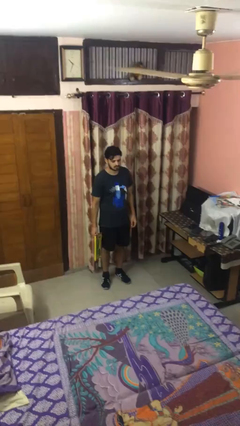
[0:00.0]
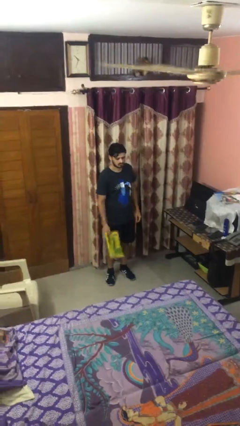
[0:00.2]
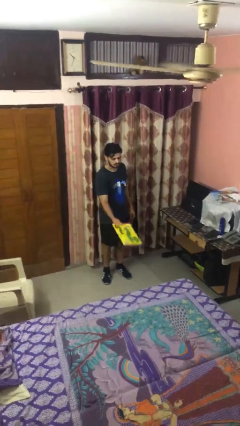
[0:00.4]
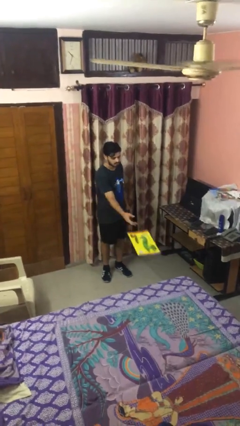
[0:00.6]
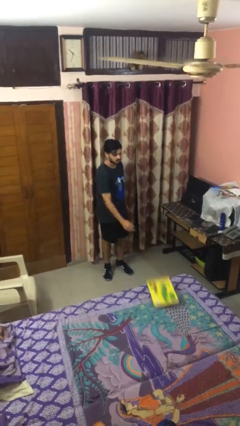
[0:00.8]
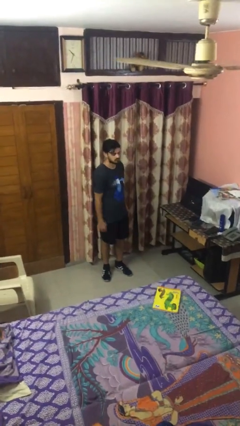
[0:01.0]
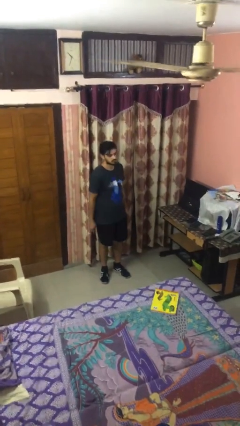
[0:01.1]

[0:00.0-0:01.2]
person throws object on bed

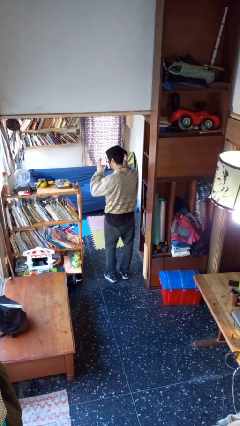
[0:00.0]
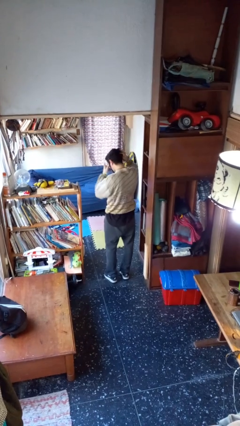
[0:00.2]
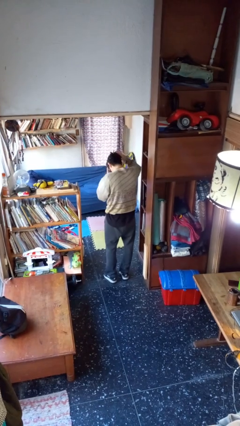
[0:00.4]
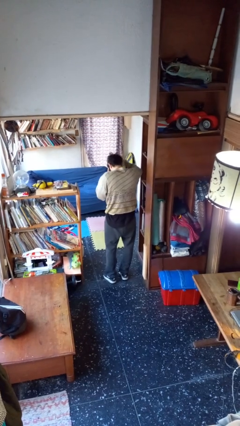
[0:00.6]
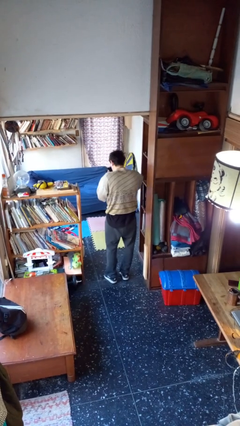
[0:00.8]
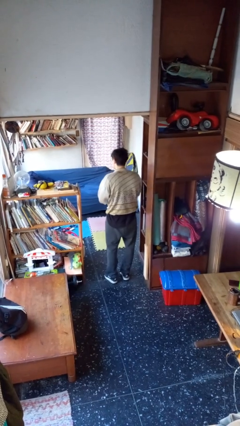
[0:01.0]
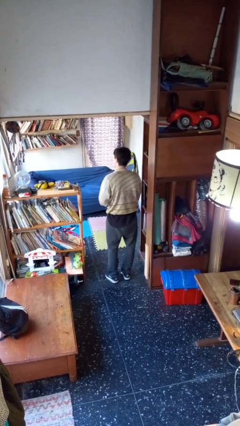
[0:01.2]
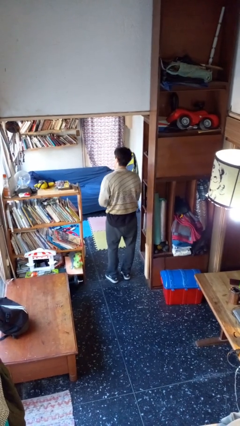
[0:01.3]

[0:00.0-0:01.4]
person takes off facemask

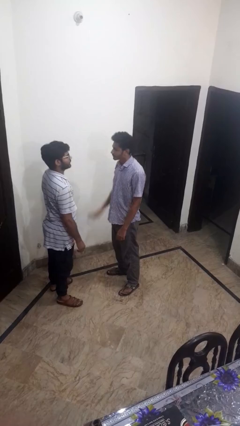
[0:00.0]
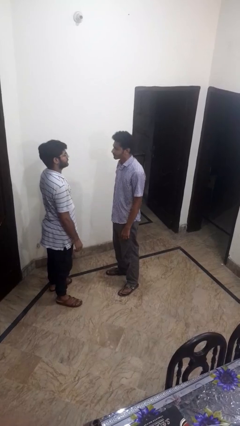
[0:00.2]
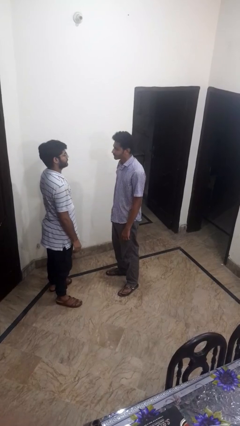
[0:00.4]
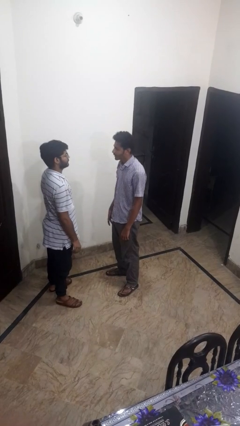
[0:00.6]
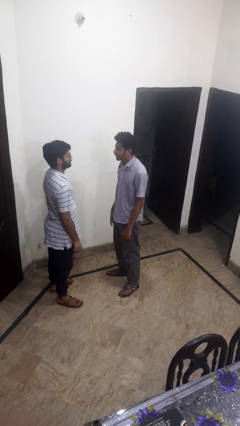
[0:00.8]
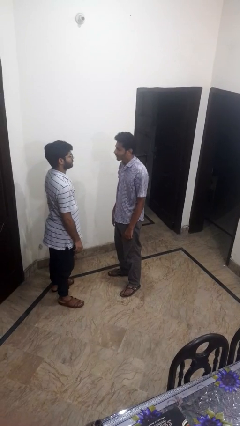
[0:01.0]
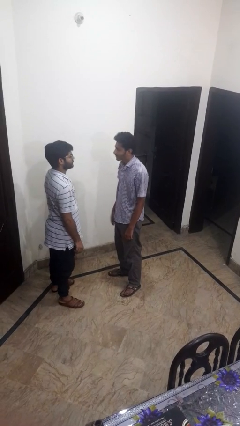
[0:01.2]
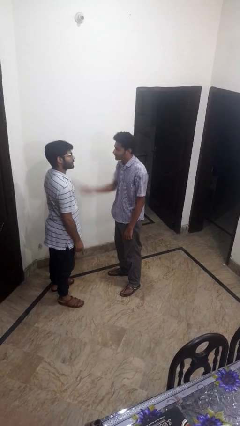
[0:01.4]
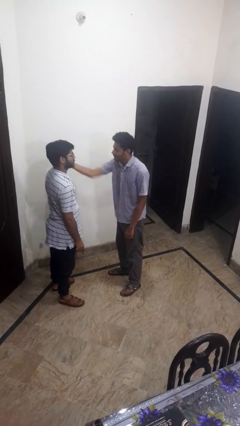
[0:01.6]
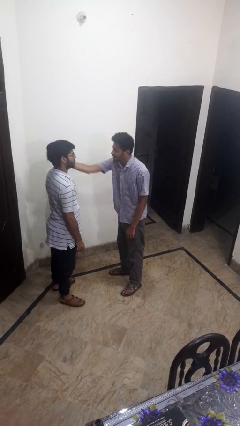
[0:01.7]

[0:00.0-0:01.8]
person grabs person by forearm

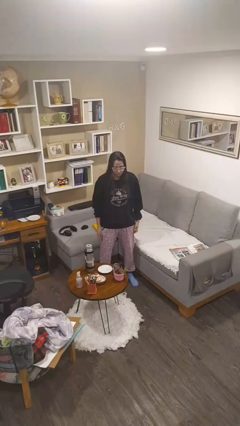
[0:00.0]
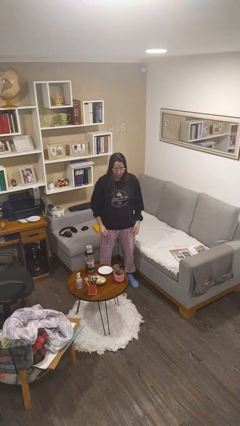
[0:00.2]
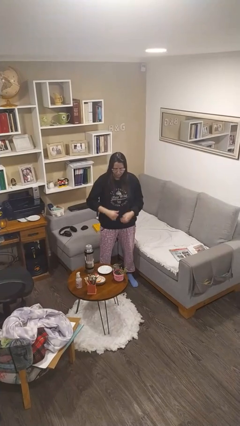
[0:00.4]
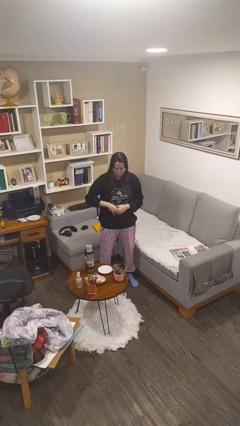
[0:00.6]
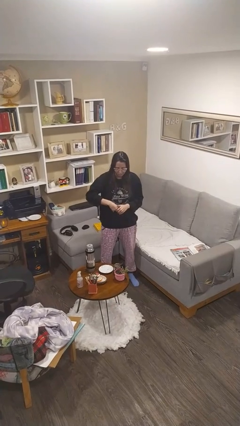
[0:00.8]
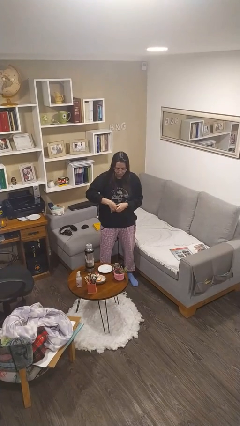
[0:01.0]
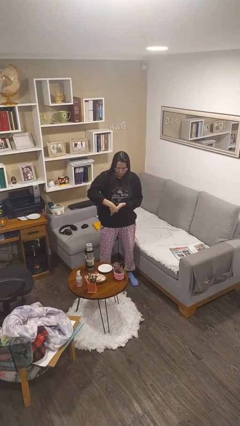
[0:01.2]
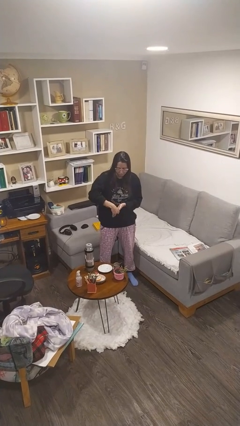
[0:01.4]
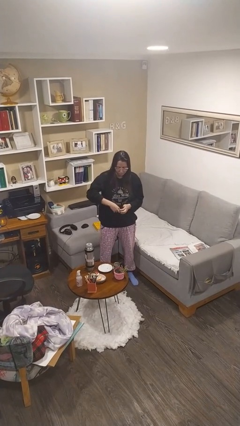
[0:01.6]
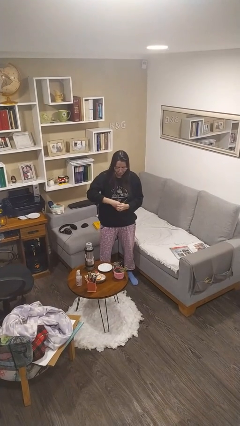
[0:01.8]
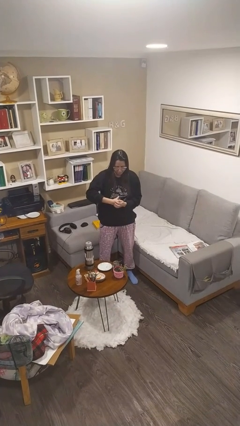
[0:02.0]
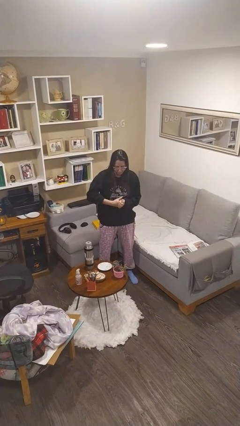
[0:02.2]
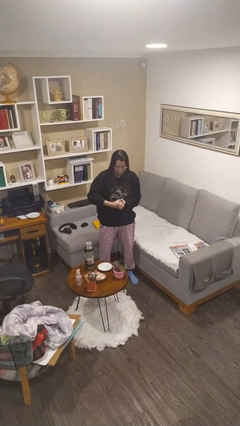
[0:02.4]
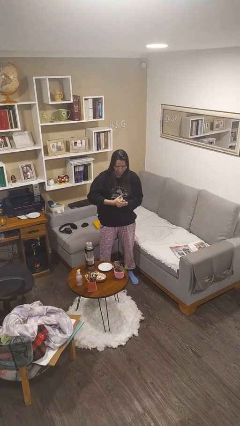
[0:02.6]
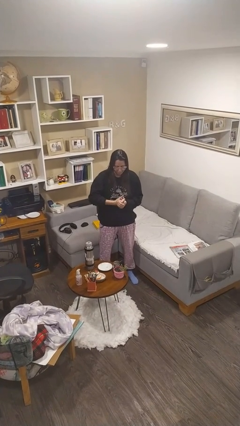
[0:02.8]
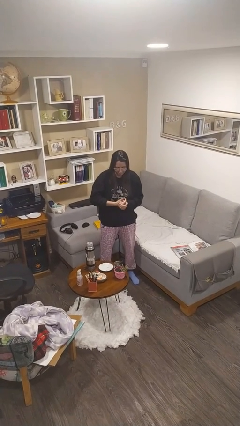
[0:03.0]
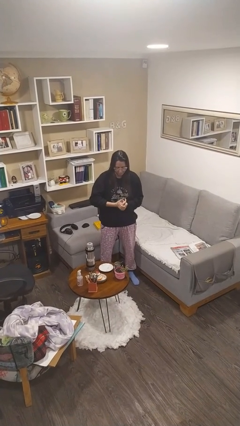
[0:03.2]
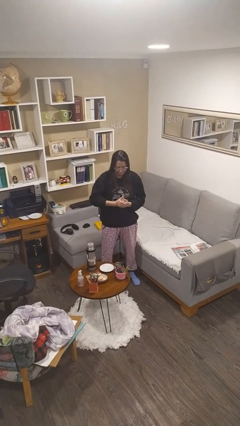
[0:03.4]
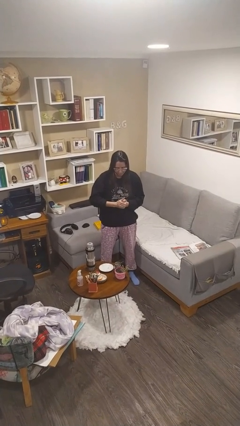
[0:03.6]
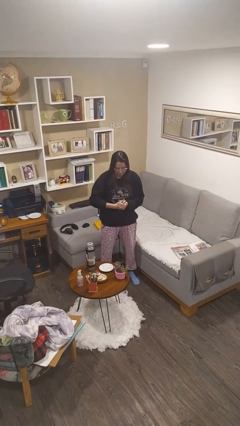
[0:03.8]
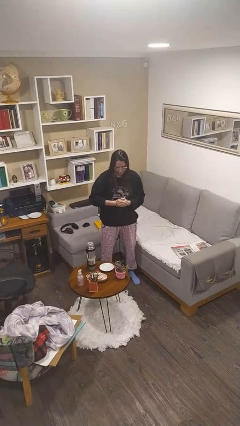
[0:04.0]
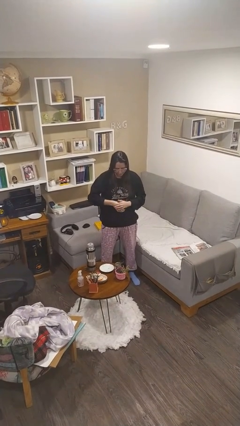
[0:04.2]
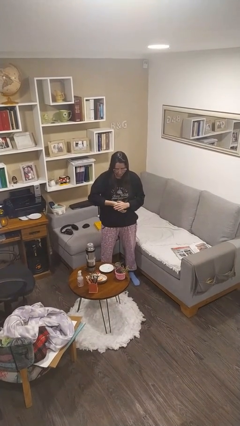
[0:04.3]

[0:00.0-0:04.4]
person cracks knuckles

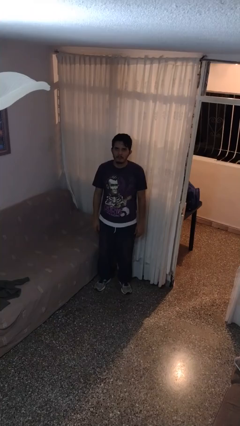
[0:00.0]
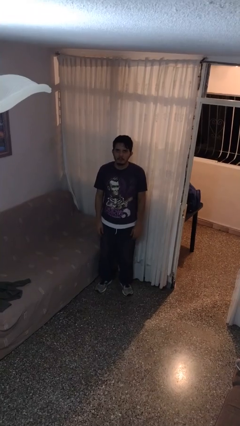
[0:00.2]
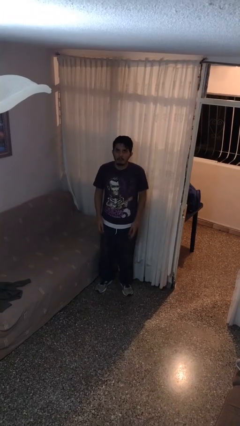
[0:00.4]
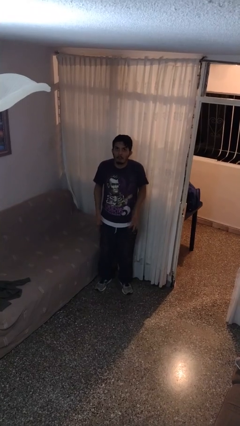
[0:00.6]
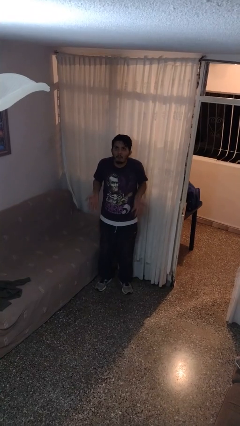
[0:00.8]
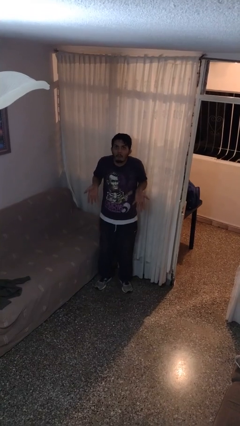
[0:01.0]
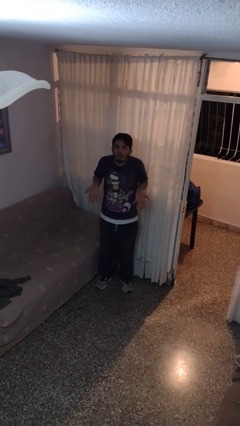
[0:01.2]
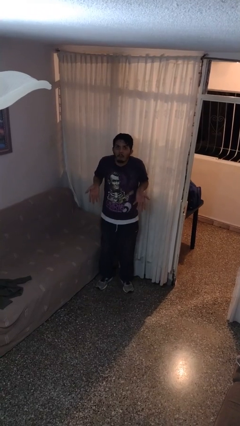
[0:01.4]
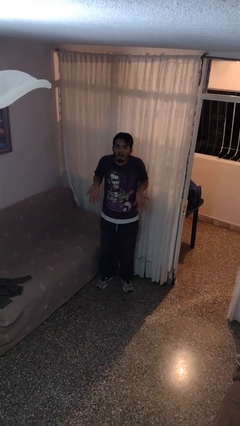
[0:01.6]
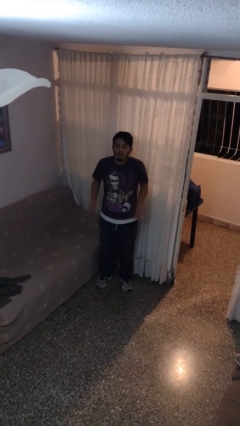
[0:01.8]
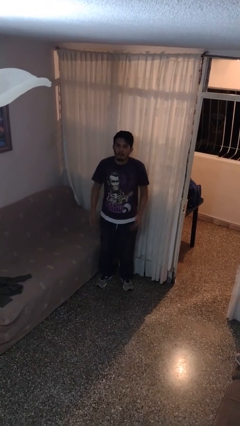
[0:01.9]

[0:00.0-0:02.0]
person shrugs

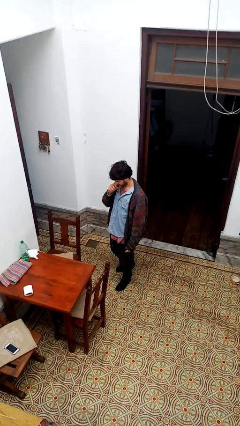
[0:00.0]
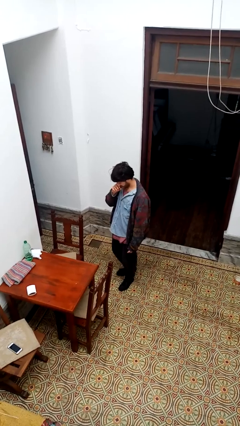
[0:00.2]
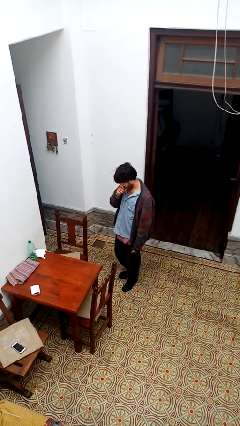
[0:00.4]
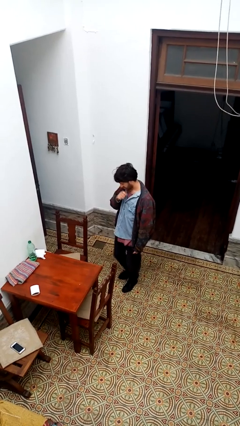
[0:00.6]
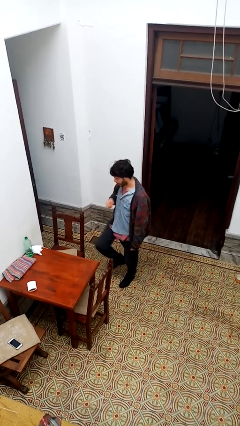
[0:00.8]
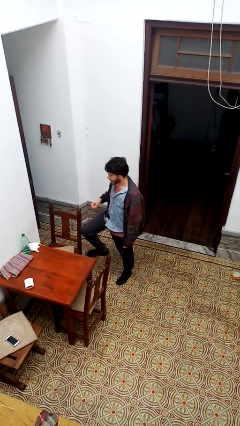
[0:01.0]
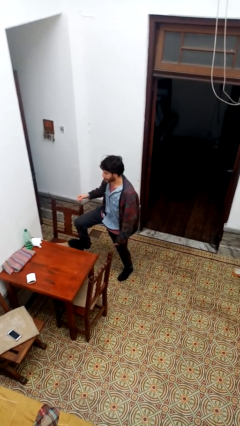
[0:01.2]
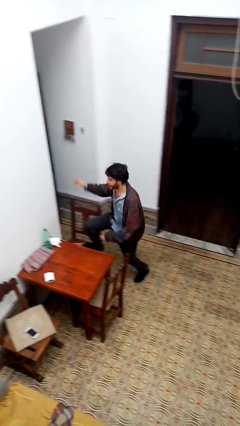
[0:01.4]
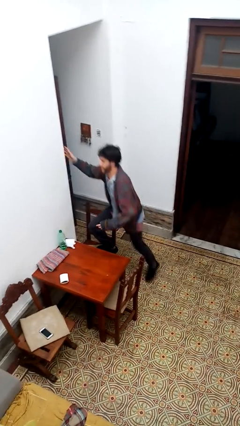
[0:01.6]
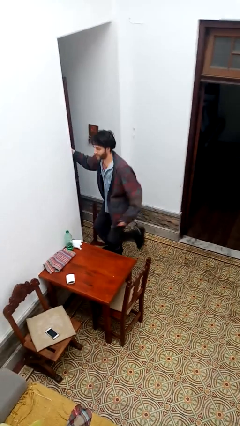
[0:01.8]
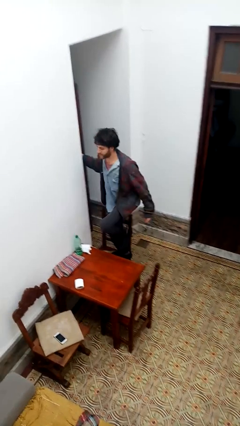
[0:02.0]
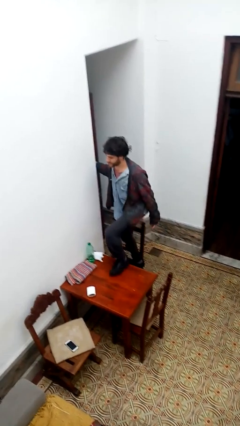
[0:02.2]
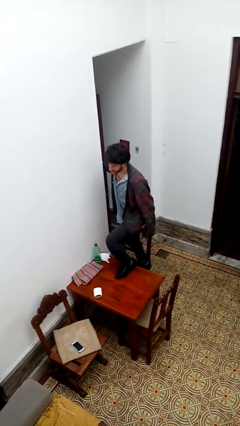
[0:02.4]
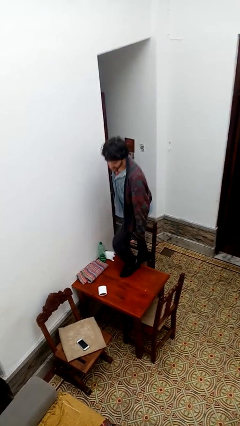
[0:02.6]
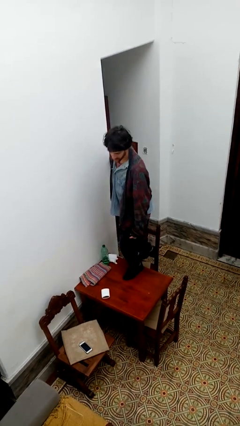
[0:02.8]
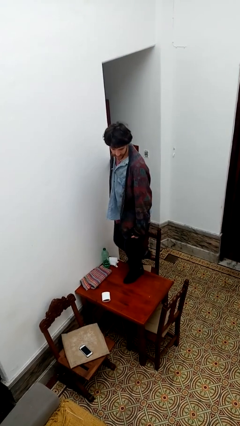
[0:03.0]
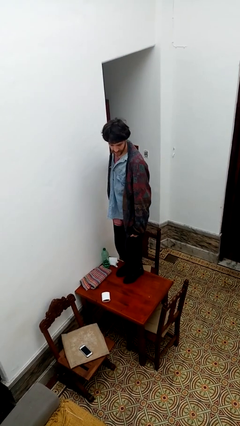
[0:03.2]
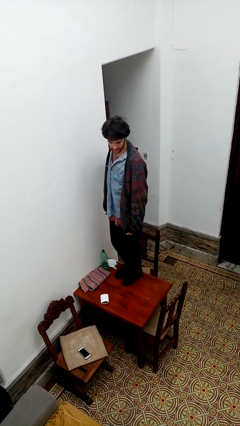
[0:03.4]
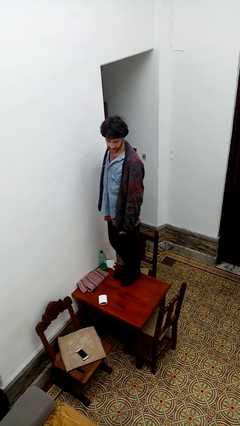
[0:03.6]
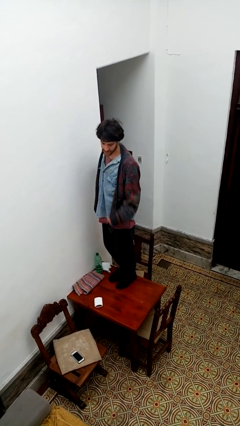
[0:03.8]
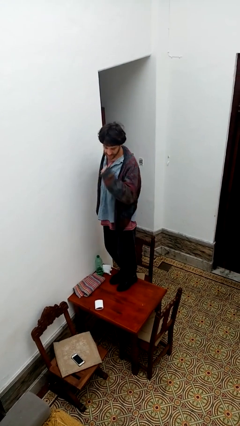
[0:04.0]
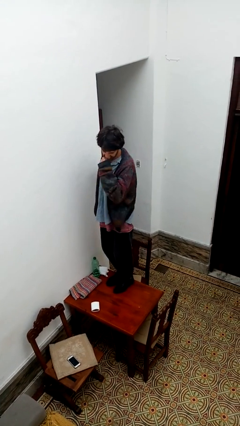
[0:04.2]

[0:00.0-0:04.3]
person climbs on table

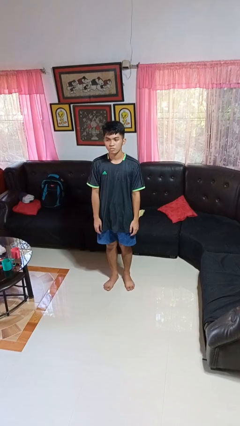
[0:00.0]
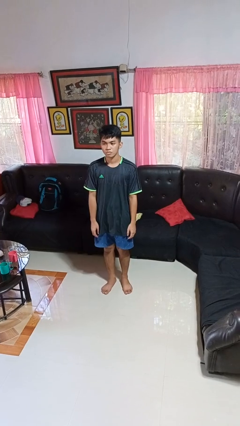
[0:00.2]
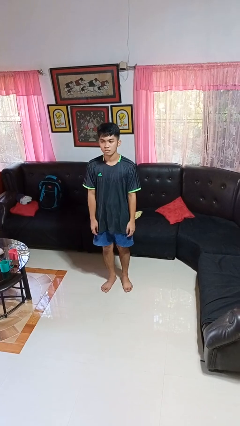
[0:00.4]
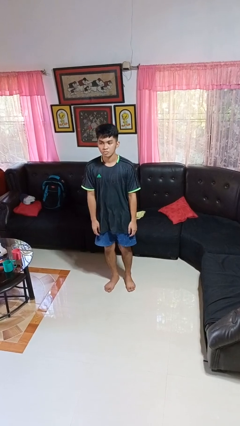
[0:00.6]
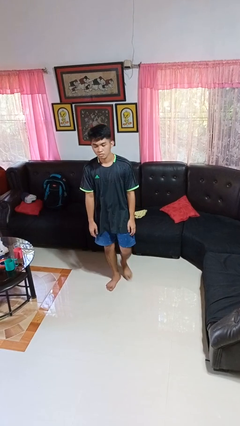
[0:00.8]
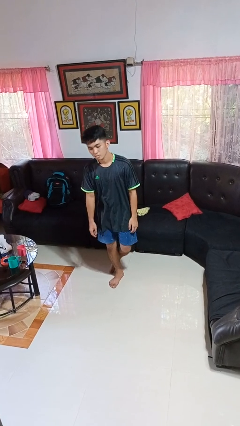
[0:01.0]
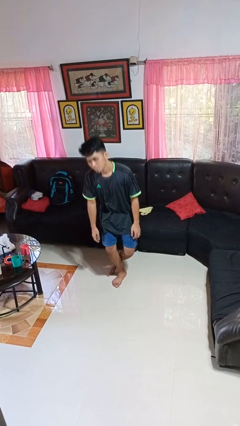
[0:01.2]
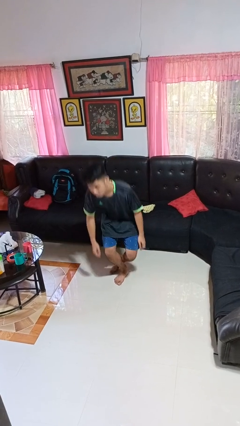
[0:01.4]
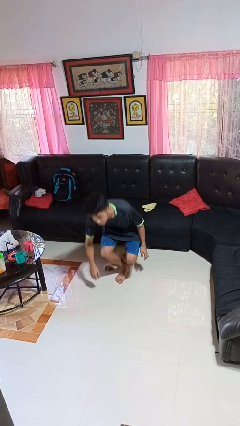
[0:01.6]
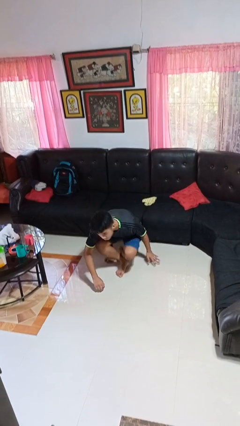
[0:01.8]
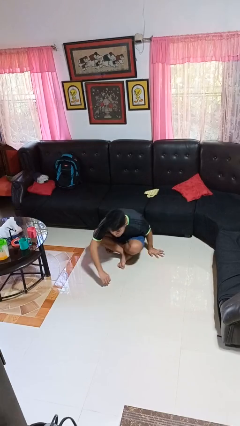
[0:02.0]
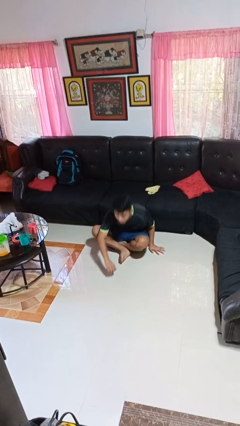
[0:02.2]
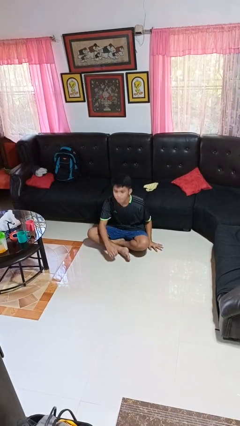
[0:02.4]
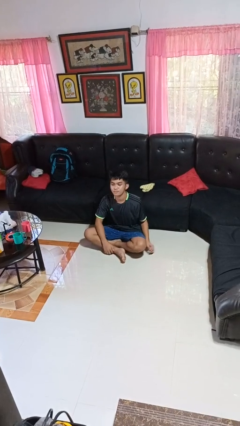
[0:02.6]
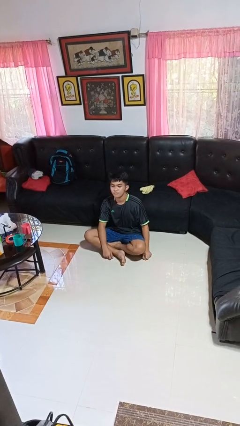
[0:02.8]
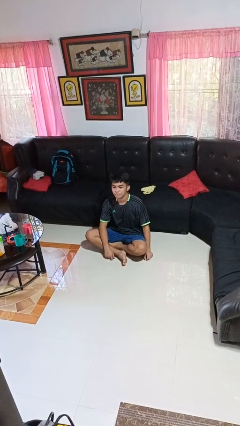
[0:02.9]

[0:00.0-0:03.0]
person sits crisscross
